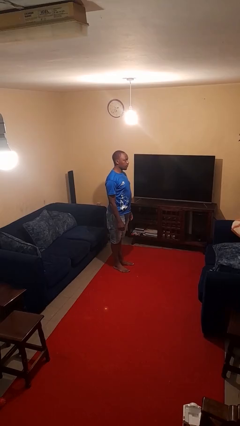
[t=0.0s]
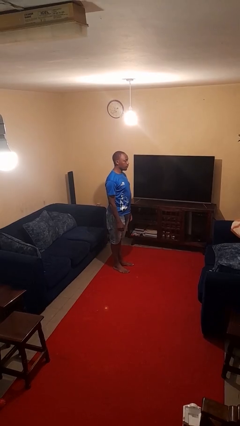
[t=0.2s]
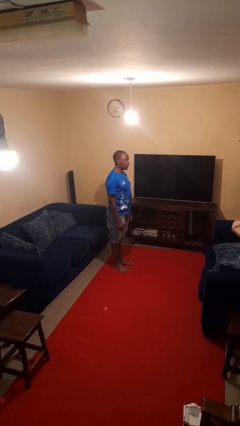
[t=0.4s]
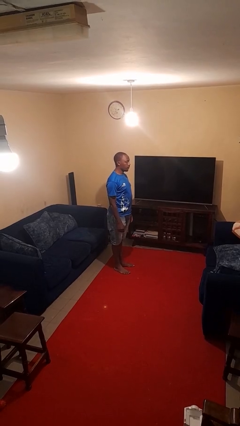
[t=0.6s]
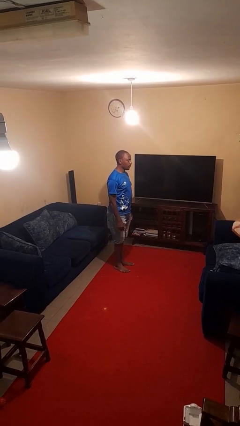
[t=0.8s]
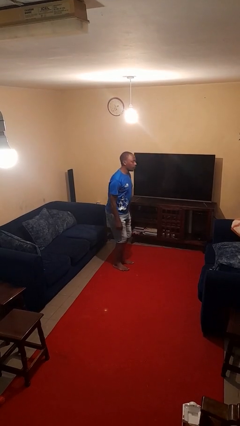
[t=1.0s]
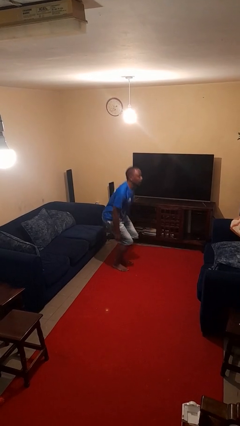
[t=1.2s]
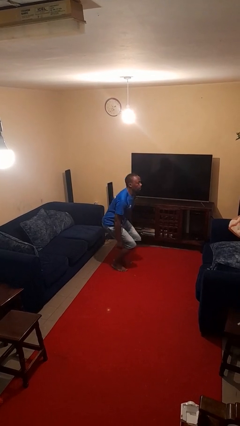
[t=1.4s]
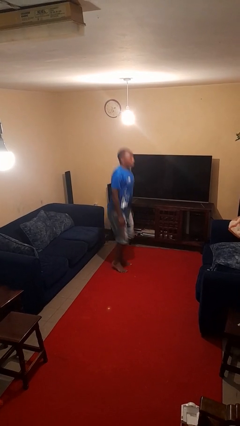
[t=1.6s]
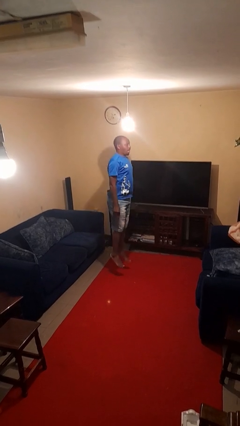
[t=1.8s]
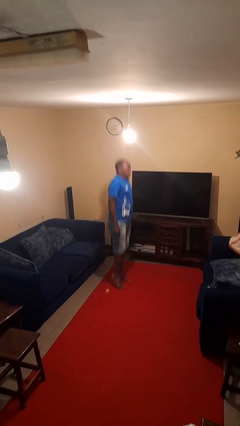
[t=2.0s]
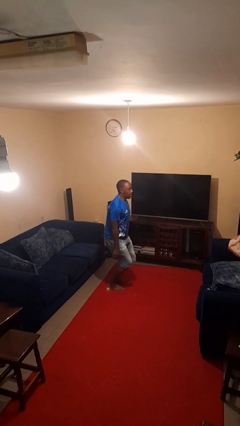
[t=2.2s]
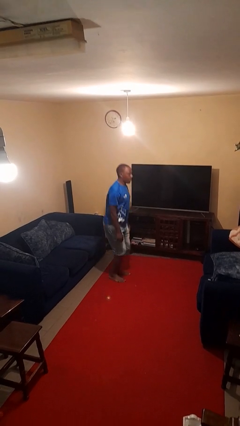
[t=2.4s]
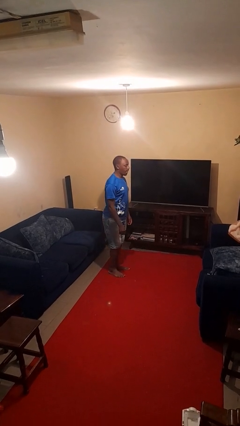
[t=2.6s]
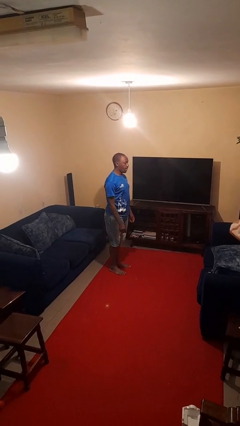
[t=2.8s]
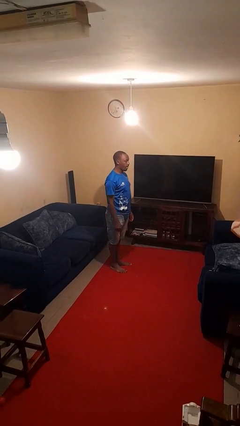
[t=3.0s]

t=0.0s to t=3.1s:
person jumps

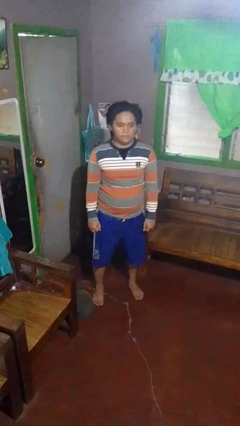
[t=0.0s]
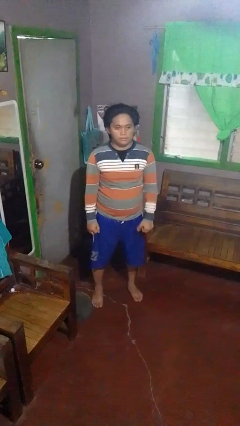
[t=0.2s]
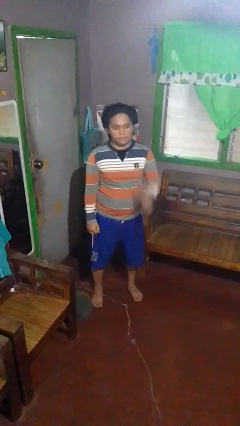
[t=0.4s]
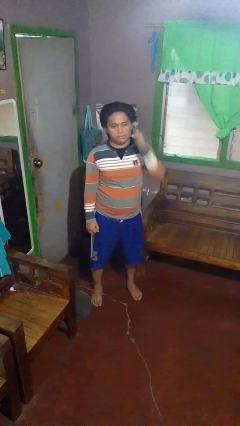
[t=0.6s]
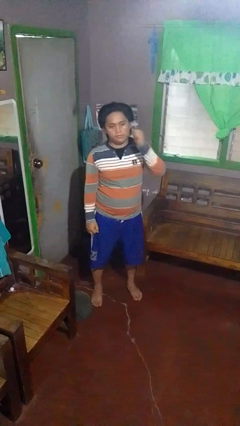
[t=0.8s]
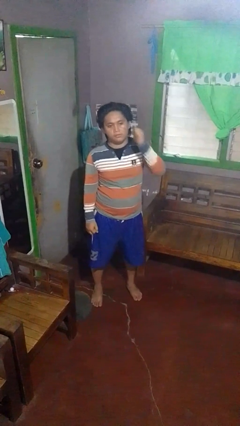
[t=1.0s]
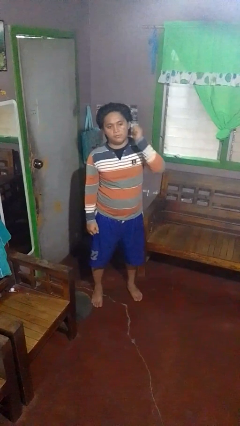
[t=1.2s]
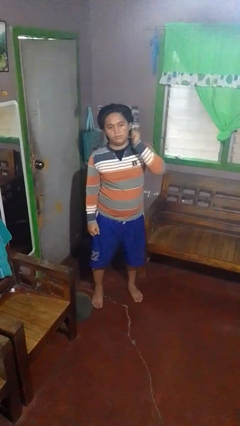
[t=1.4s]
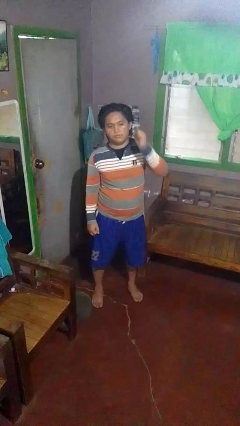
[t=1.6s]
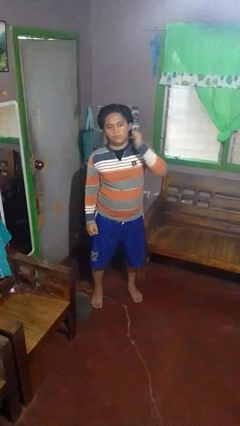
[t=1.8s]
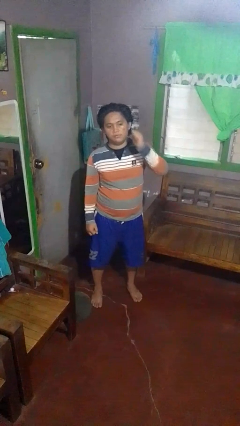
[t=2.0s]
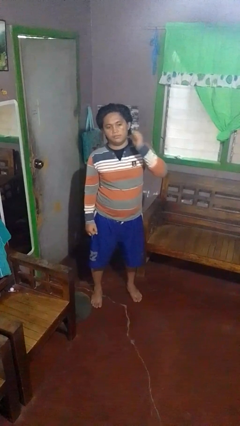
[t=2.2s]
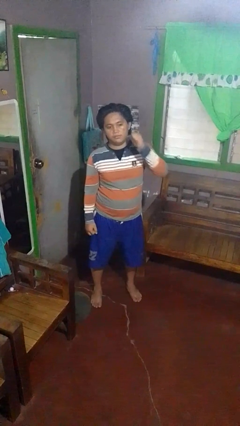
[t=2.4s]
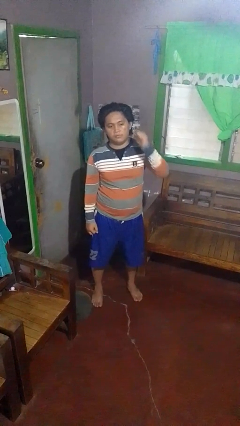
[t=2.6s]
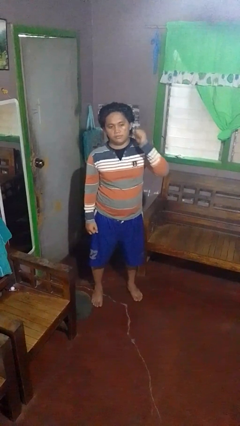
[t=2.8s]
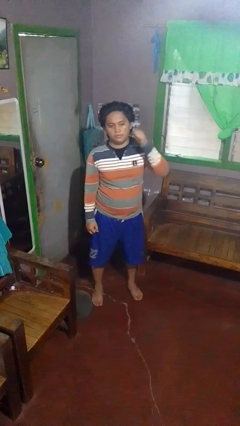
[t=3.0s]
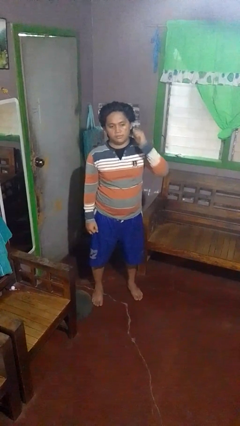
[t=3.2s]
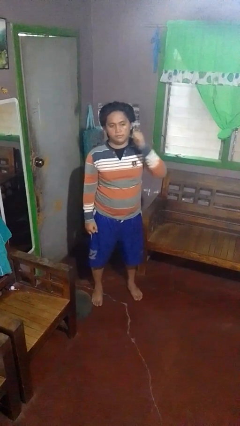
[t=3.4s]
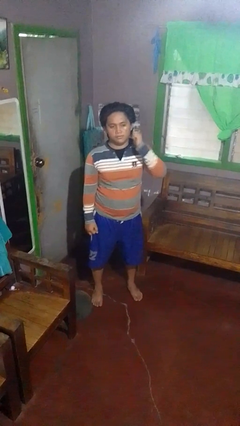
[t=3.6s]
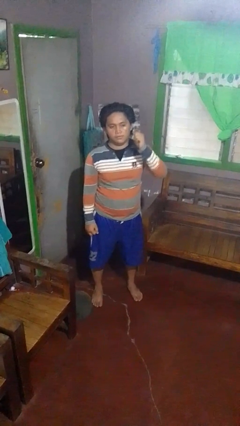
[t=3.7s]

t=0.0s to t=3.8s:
person gestures behind me

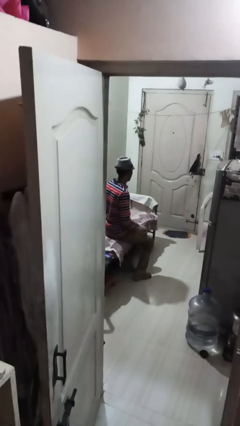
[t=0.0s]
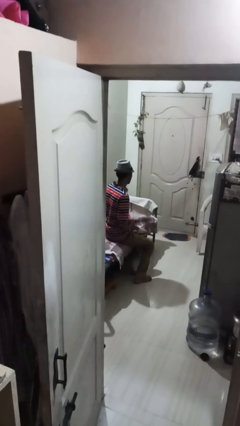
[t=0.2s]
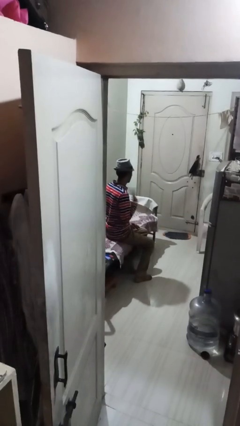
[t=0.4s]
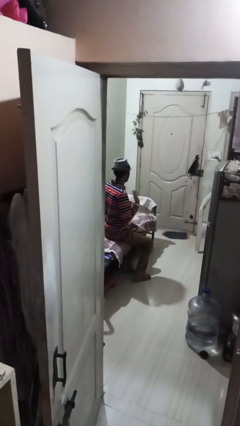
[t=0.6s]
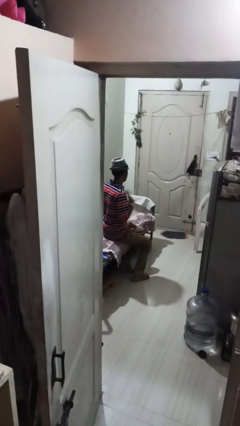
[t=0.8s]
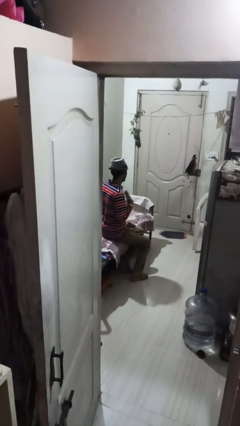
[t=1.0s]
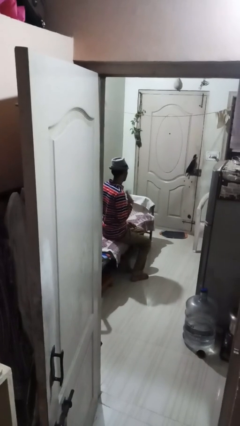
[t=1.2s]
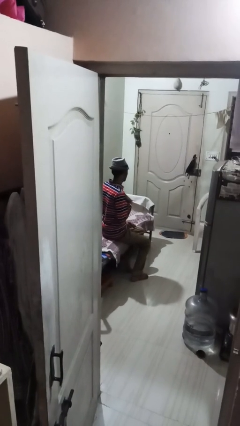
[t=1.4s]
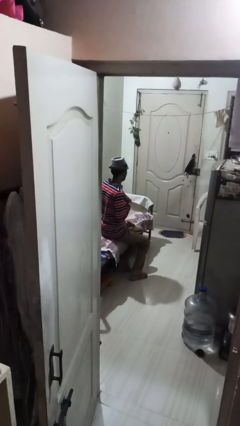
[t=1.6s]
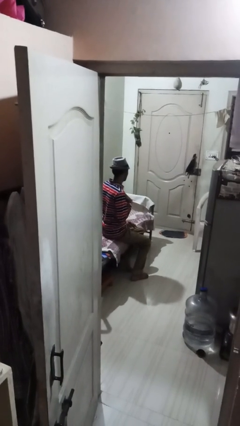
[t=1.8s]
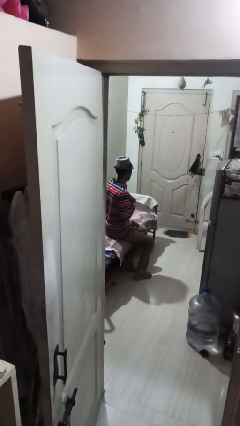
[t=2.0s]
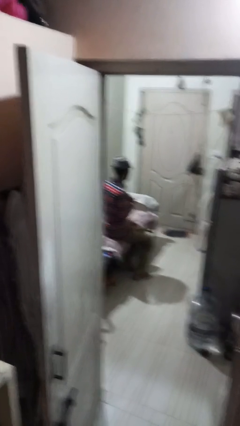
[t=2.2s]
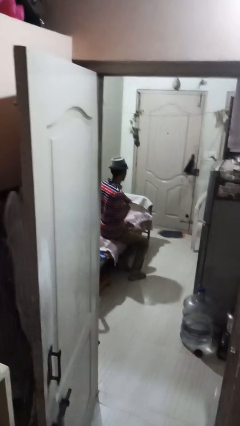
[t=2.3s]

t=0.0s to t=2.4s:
person drums on chest

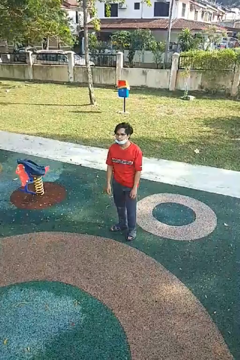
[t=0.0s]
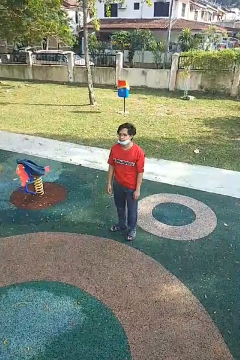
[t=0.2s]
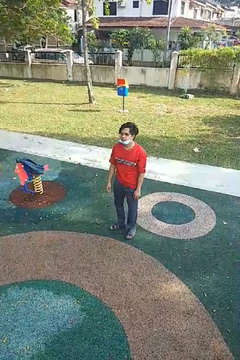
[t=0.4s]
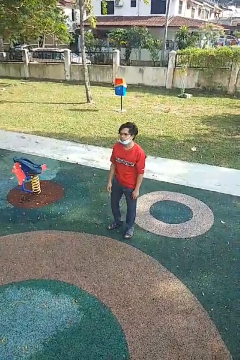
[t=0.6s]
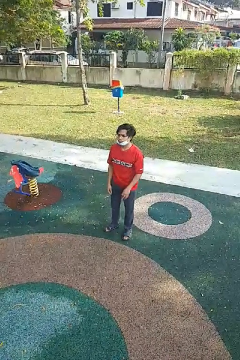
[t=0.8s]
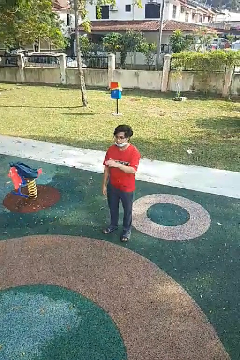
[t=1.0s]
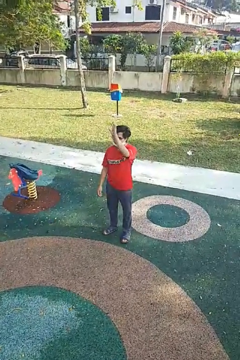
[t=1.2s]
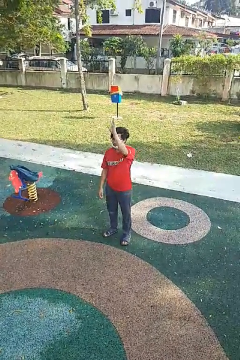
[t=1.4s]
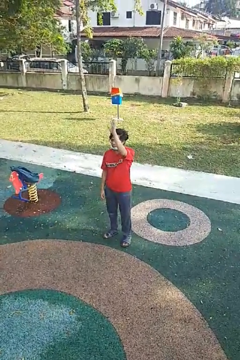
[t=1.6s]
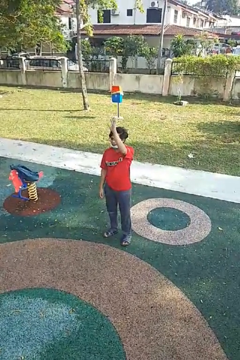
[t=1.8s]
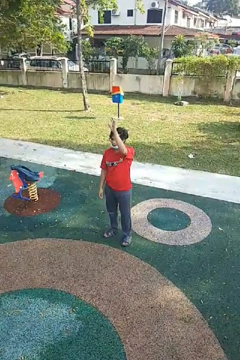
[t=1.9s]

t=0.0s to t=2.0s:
person gestures raise hand

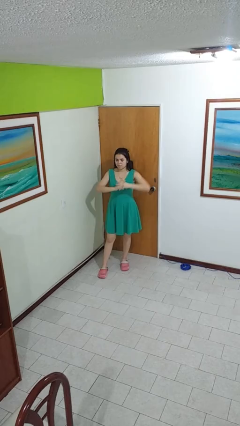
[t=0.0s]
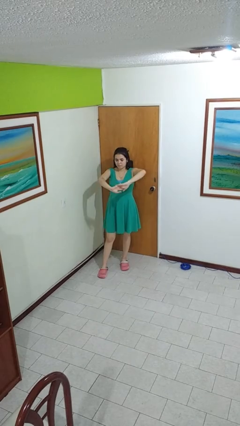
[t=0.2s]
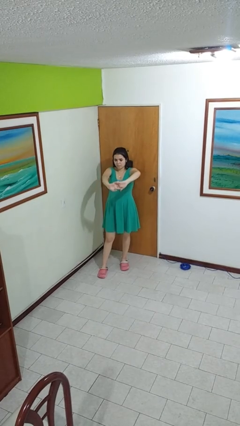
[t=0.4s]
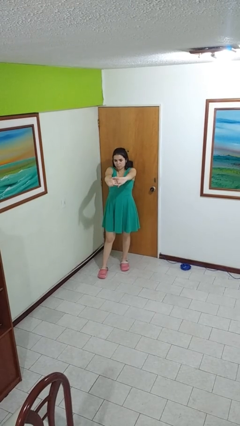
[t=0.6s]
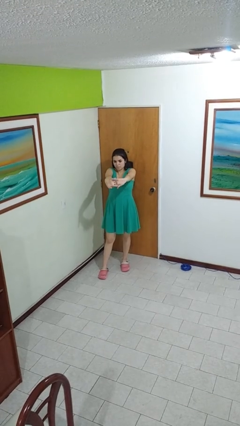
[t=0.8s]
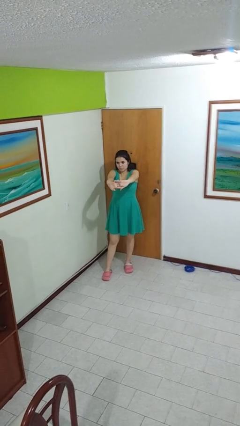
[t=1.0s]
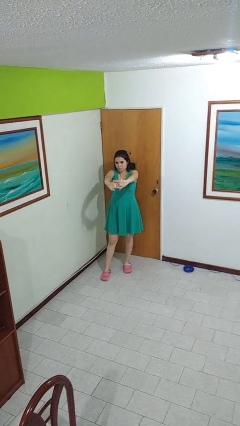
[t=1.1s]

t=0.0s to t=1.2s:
person cracks knuckles

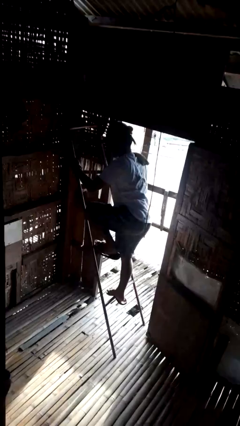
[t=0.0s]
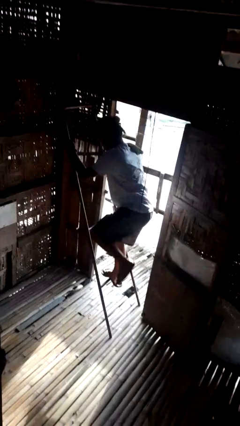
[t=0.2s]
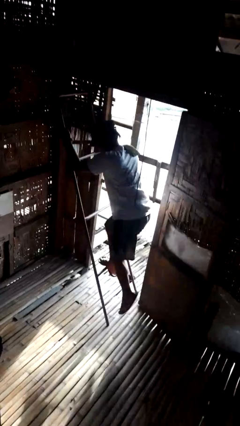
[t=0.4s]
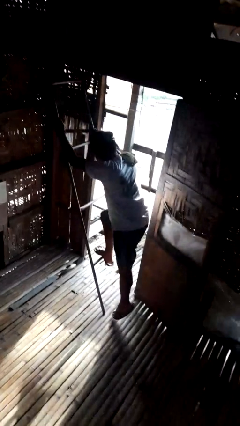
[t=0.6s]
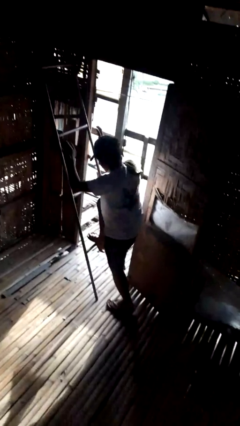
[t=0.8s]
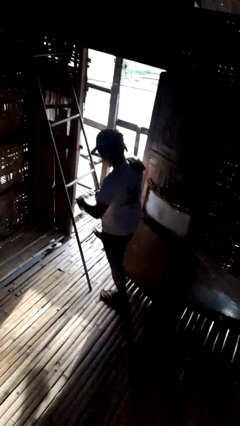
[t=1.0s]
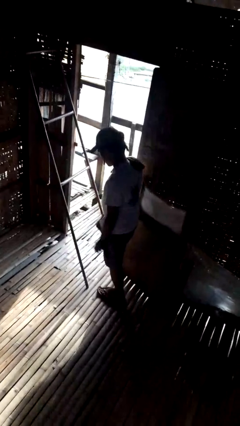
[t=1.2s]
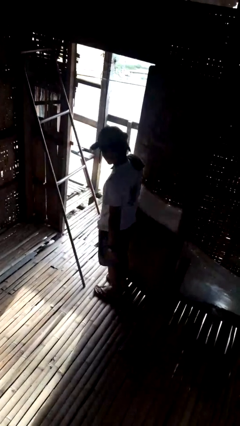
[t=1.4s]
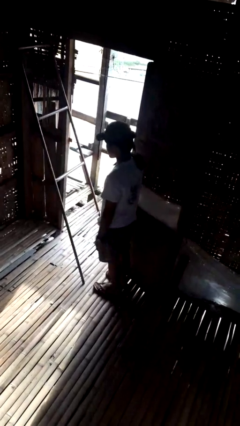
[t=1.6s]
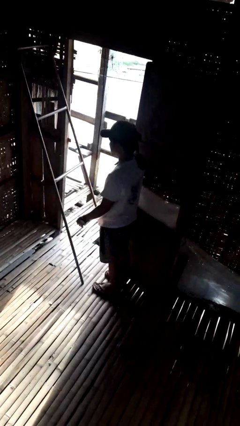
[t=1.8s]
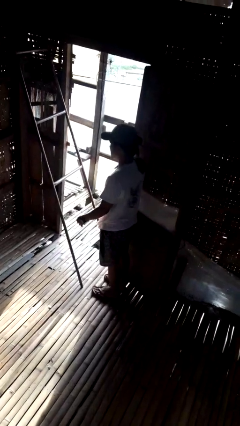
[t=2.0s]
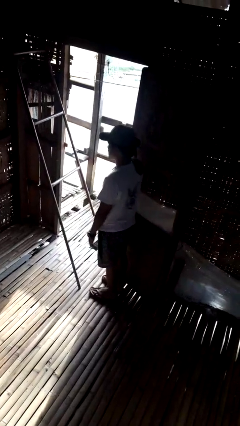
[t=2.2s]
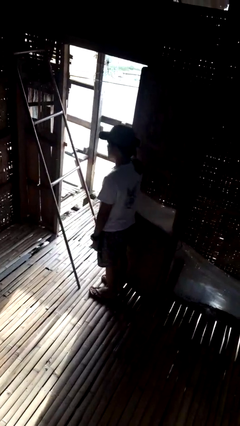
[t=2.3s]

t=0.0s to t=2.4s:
person climbs down ladder

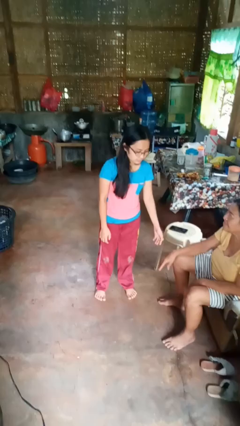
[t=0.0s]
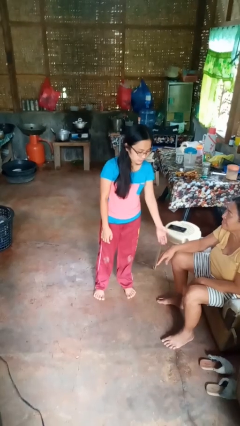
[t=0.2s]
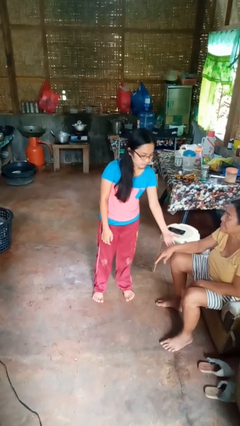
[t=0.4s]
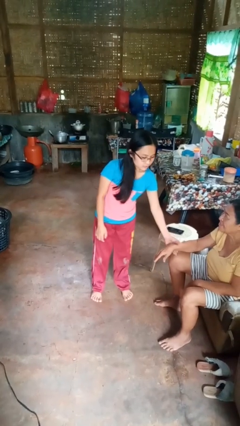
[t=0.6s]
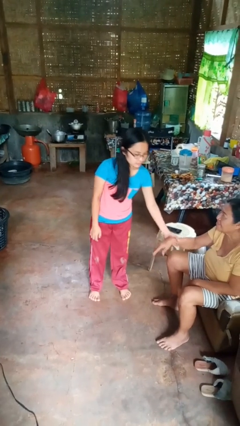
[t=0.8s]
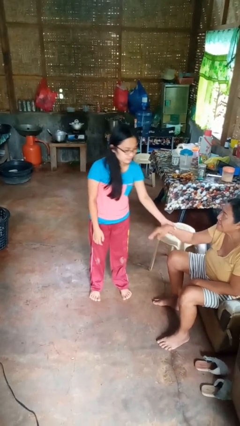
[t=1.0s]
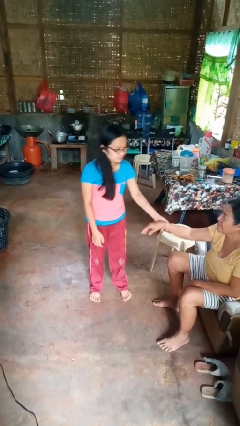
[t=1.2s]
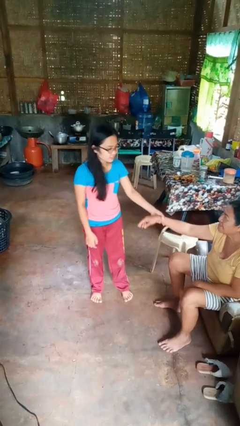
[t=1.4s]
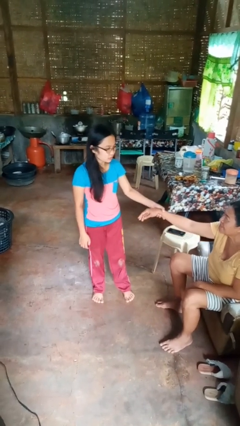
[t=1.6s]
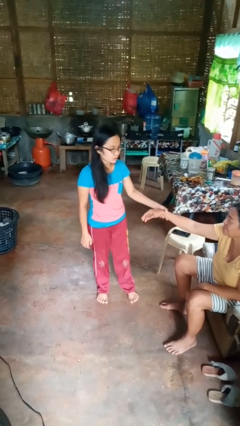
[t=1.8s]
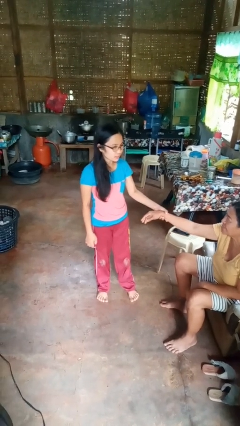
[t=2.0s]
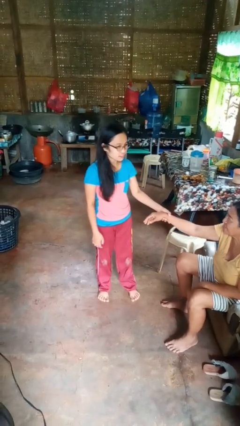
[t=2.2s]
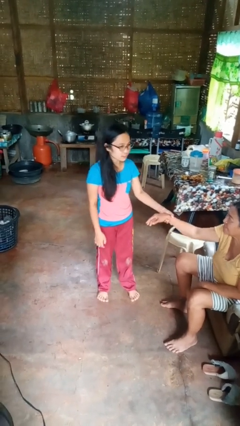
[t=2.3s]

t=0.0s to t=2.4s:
person grabs person by forearm
